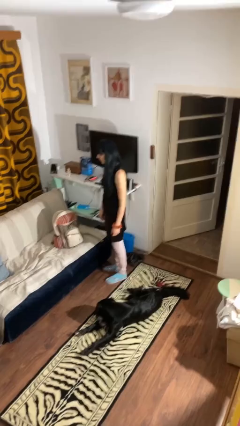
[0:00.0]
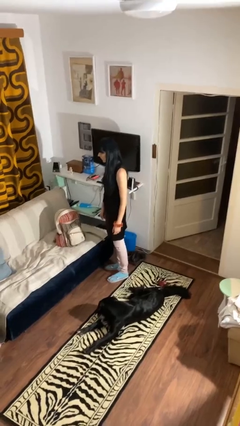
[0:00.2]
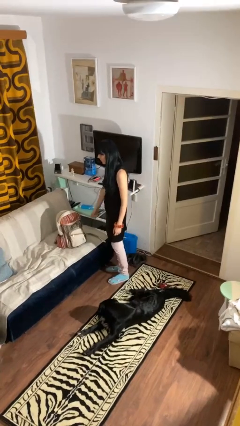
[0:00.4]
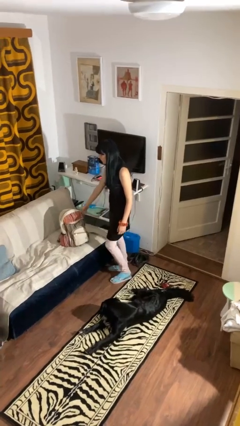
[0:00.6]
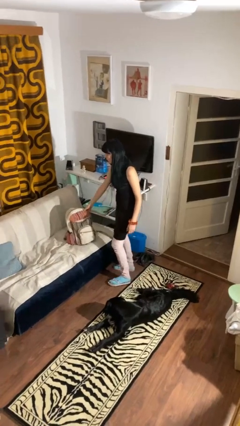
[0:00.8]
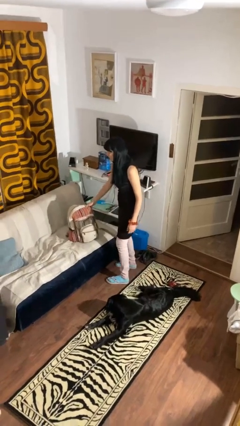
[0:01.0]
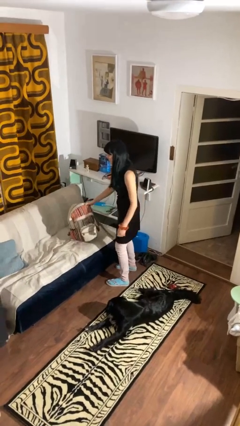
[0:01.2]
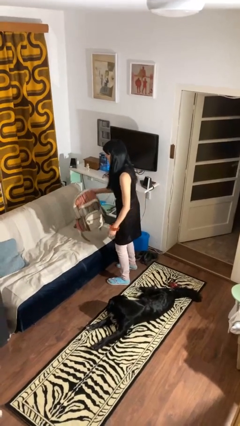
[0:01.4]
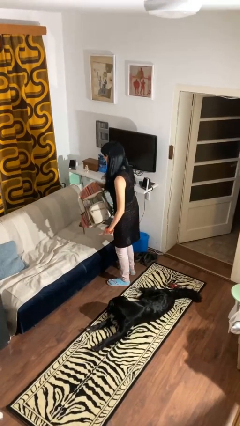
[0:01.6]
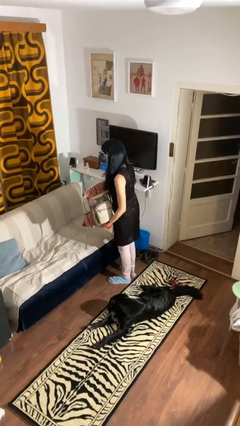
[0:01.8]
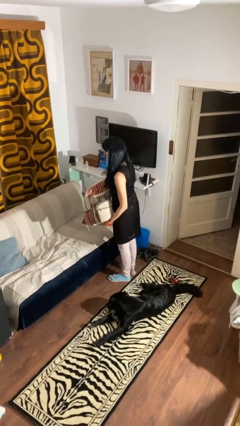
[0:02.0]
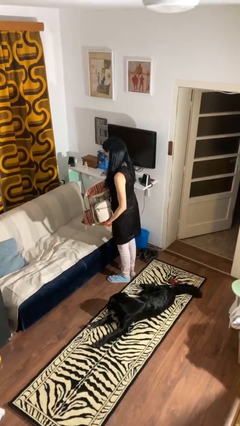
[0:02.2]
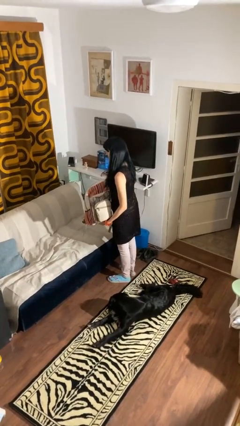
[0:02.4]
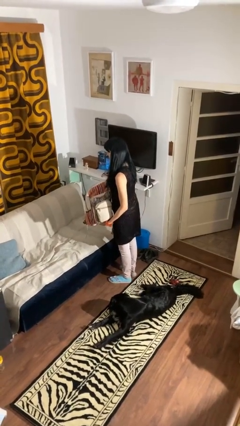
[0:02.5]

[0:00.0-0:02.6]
person picks up object from couch

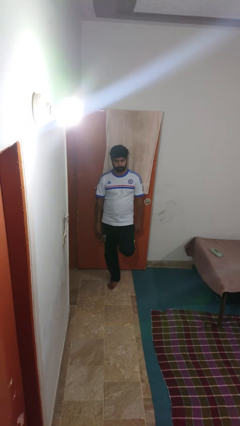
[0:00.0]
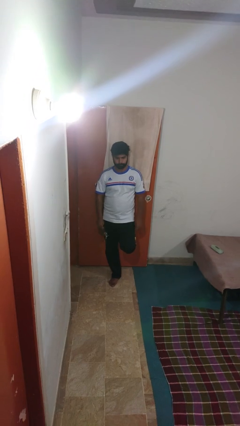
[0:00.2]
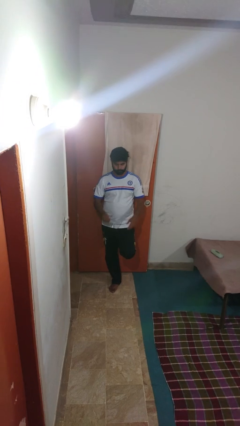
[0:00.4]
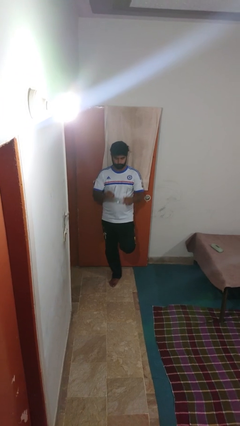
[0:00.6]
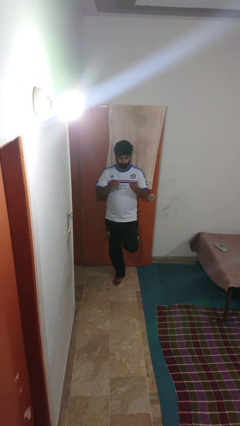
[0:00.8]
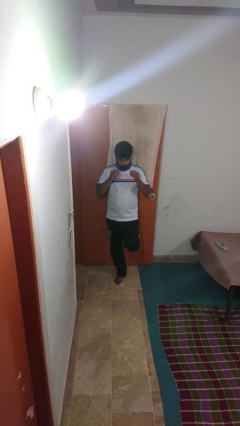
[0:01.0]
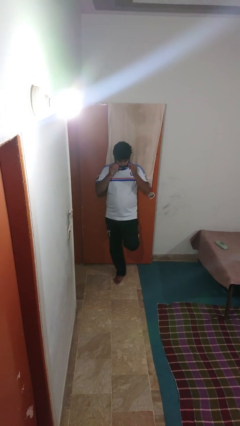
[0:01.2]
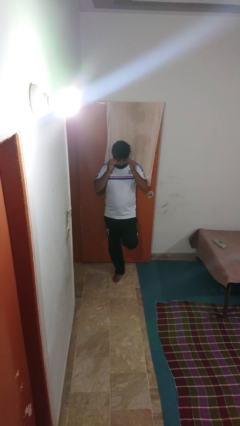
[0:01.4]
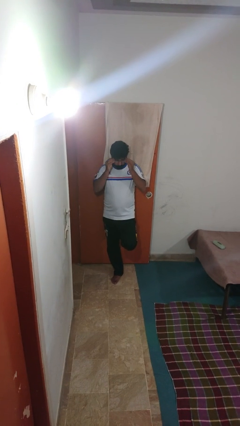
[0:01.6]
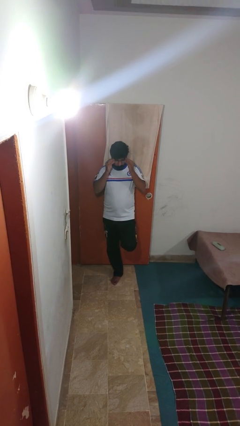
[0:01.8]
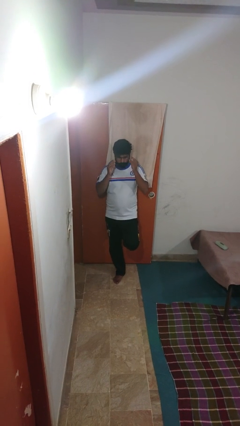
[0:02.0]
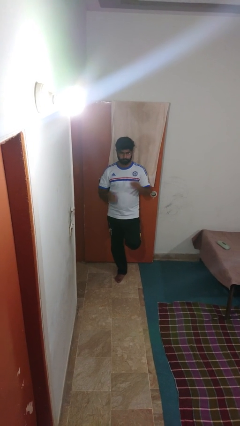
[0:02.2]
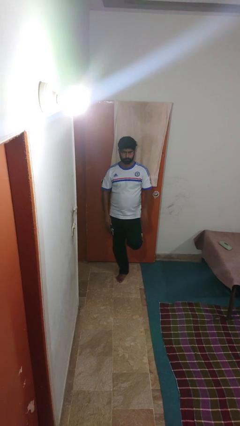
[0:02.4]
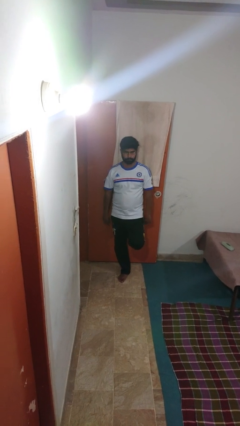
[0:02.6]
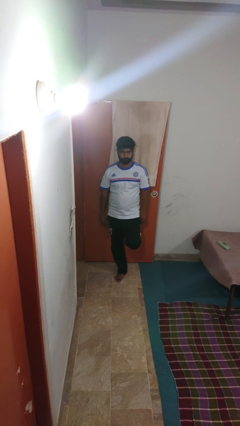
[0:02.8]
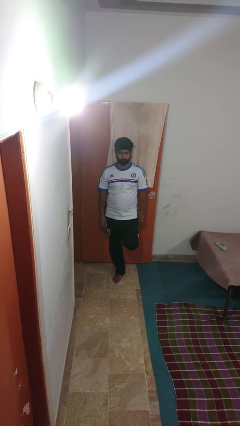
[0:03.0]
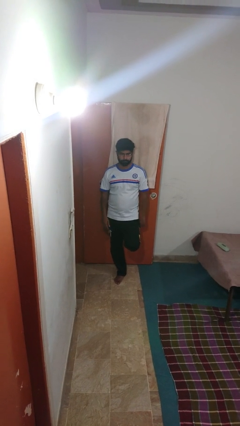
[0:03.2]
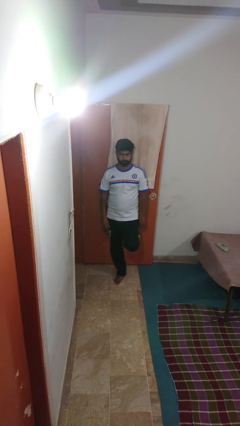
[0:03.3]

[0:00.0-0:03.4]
person puts on glasses

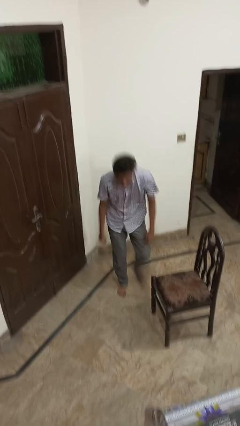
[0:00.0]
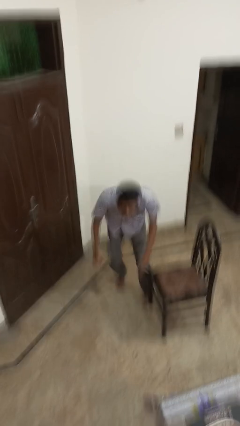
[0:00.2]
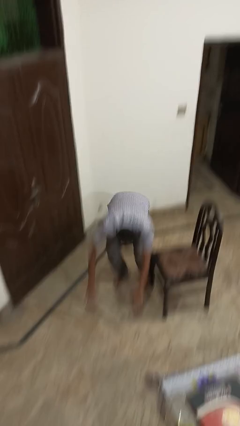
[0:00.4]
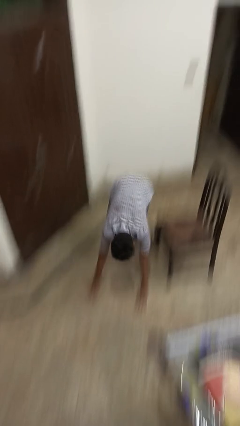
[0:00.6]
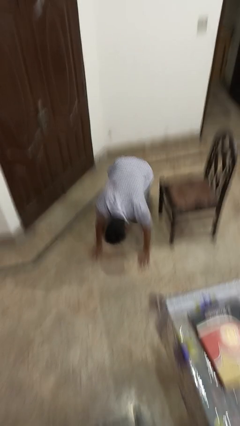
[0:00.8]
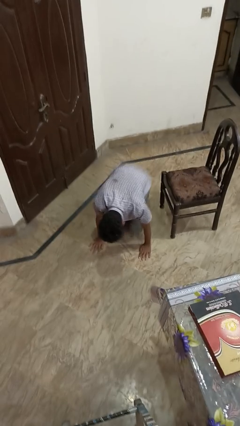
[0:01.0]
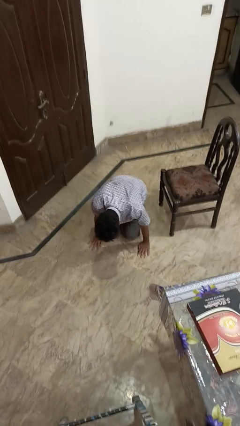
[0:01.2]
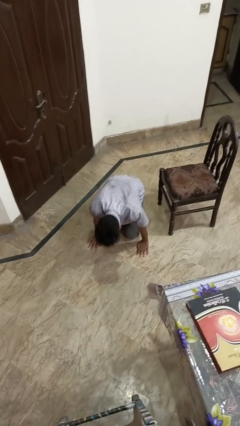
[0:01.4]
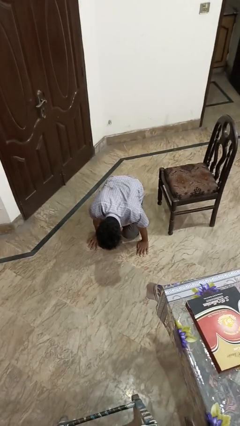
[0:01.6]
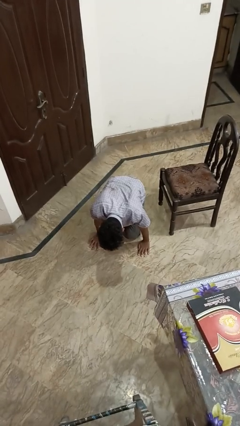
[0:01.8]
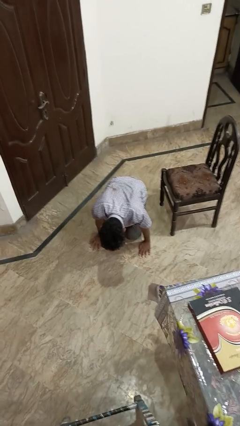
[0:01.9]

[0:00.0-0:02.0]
person trips on object on floor

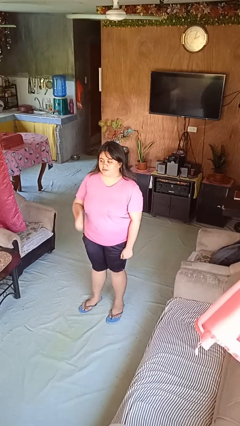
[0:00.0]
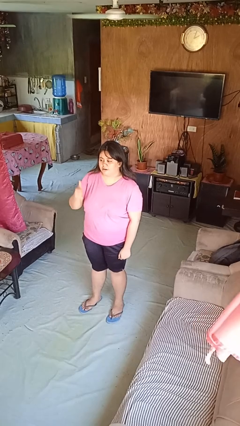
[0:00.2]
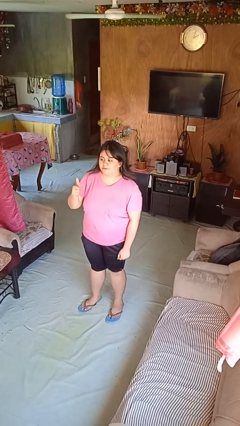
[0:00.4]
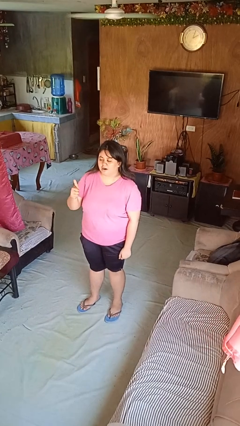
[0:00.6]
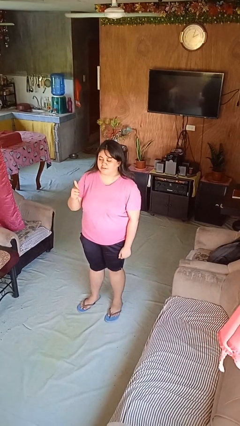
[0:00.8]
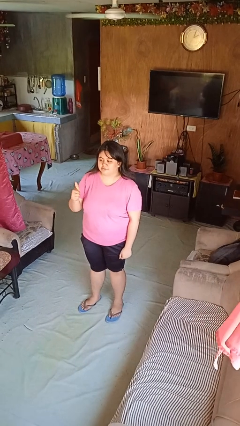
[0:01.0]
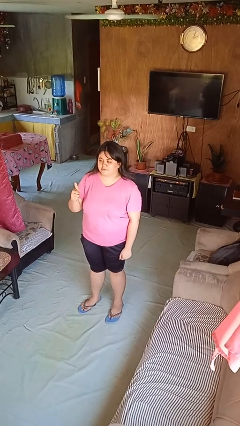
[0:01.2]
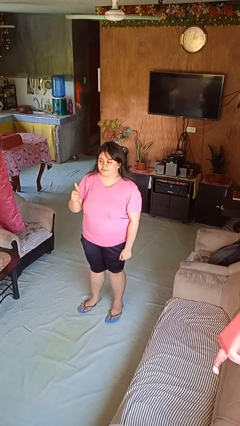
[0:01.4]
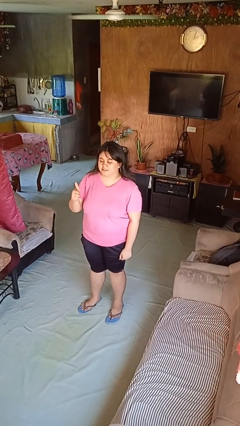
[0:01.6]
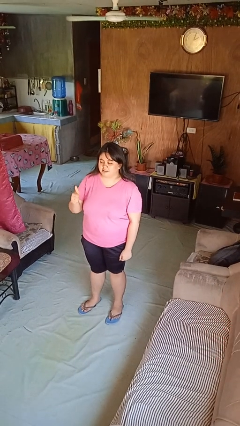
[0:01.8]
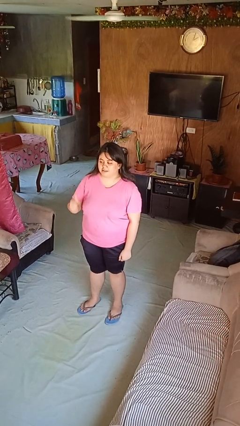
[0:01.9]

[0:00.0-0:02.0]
person gestures thumbs up

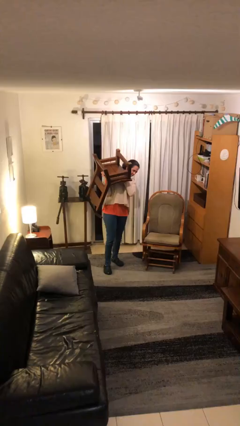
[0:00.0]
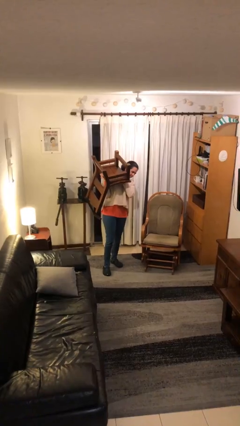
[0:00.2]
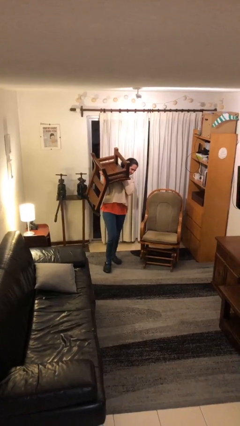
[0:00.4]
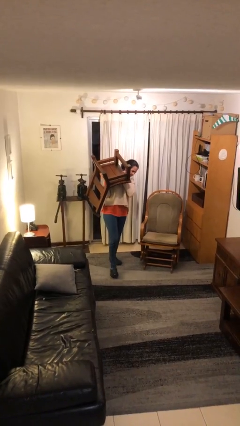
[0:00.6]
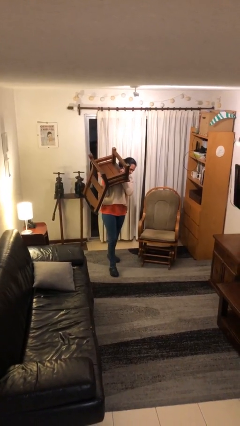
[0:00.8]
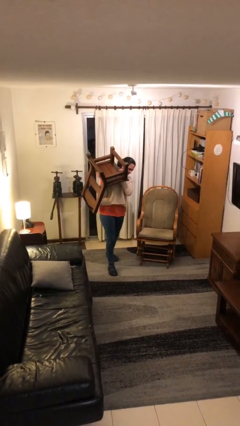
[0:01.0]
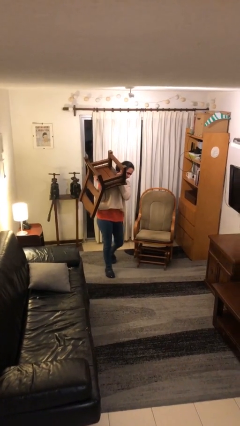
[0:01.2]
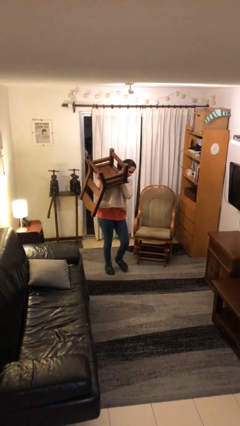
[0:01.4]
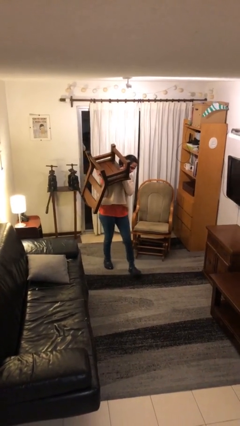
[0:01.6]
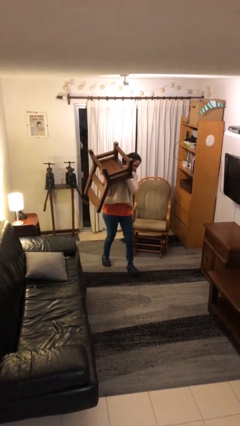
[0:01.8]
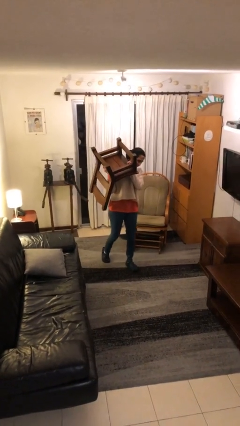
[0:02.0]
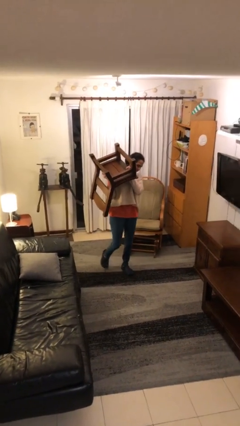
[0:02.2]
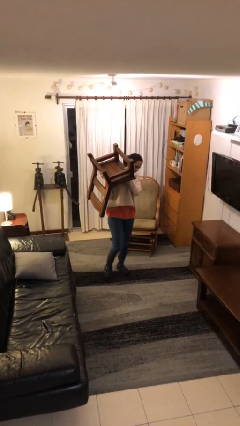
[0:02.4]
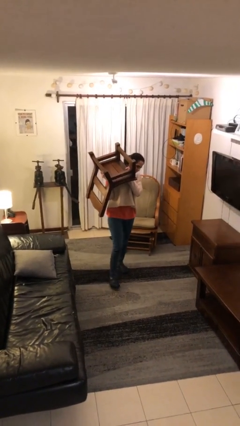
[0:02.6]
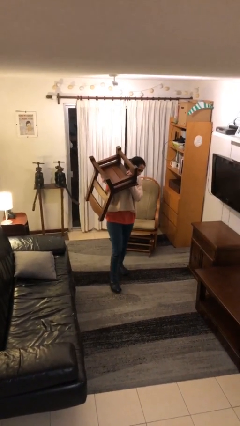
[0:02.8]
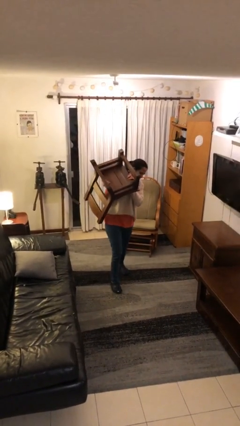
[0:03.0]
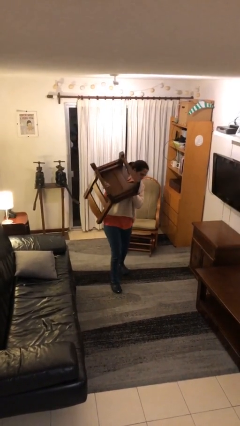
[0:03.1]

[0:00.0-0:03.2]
person carries heavy object

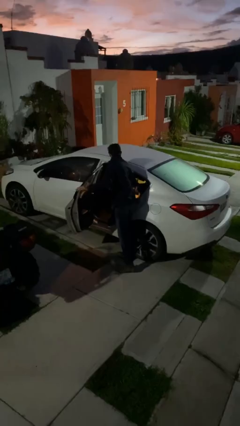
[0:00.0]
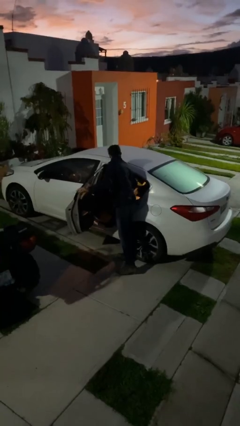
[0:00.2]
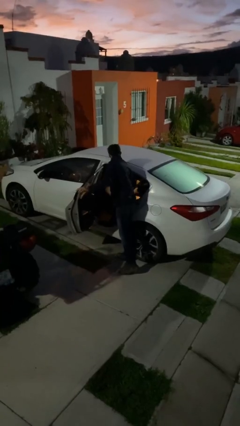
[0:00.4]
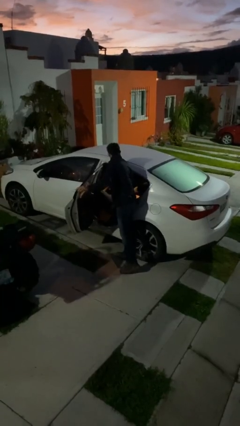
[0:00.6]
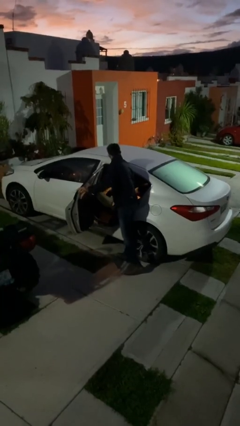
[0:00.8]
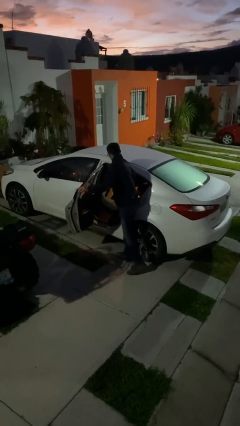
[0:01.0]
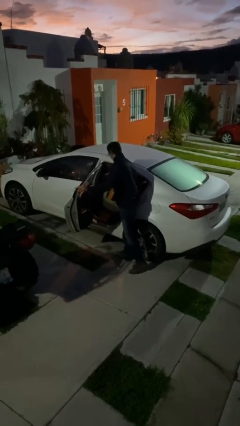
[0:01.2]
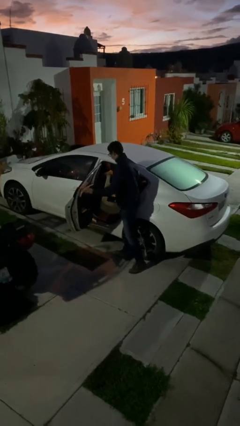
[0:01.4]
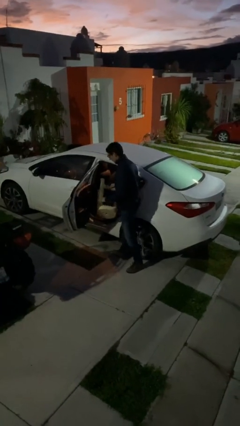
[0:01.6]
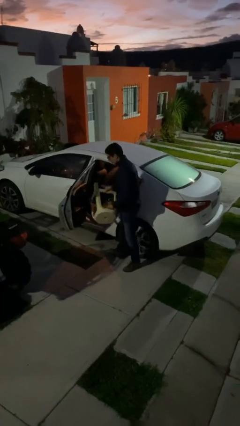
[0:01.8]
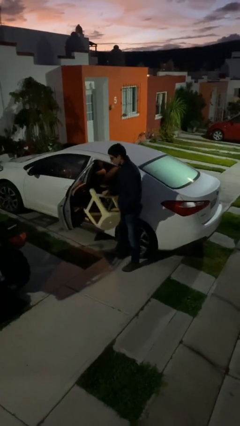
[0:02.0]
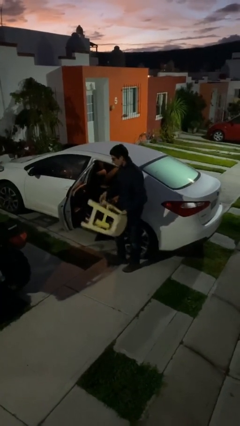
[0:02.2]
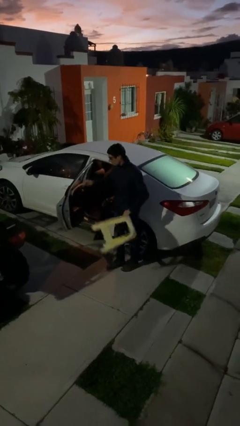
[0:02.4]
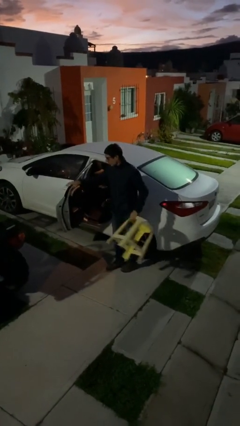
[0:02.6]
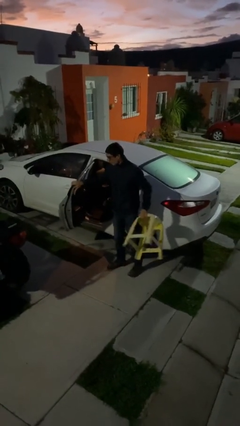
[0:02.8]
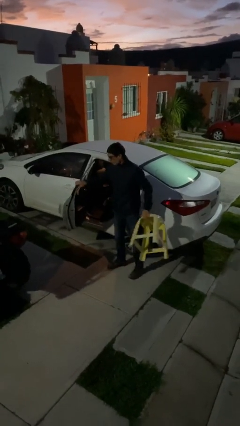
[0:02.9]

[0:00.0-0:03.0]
person unloads car

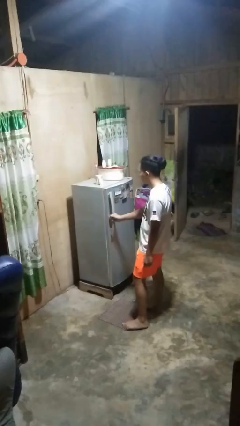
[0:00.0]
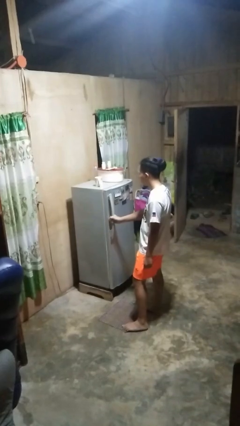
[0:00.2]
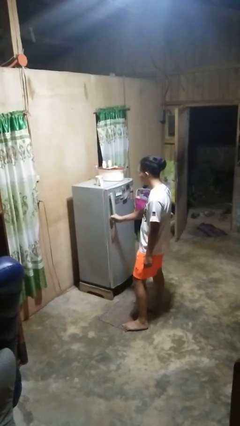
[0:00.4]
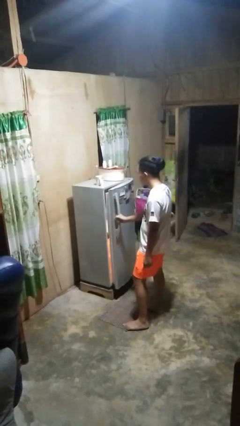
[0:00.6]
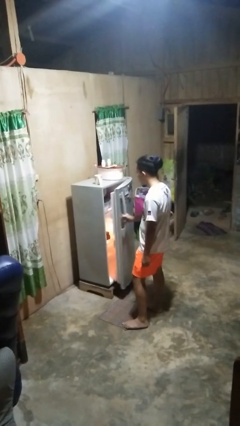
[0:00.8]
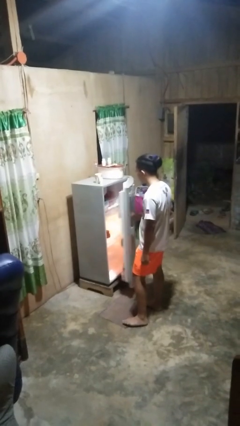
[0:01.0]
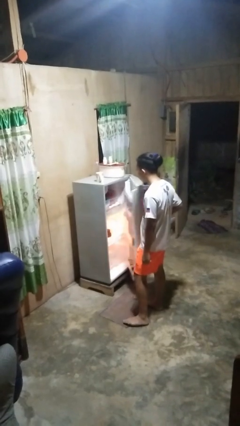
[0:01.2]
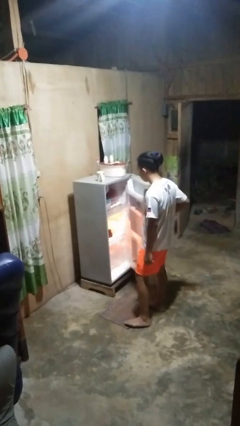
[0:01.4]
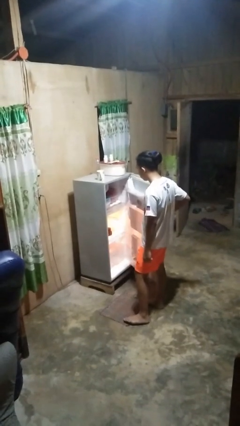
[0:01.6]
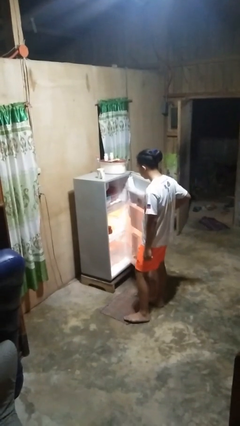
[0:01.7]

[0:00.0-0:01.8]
person opens refrigerator
